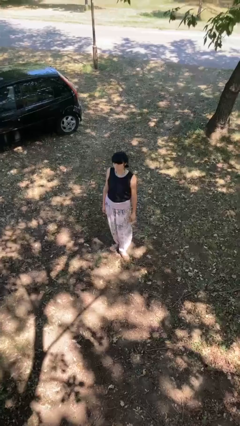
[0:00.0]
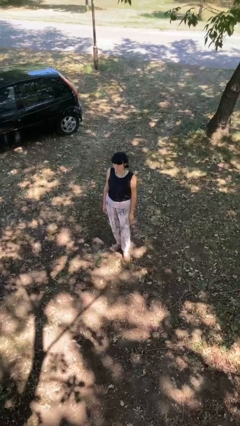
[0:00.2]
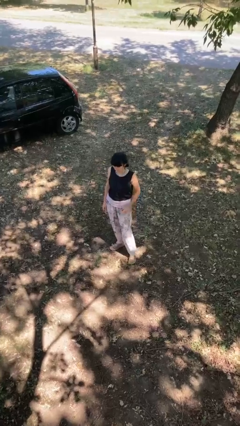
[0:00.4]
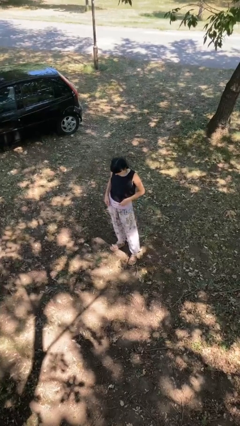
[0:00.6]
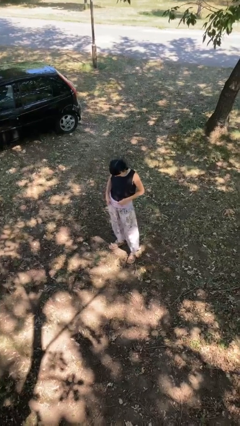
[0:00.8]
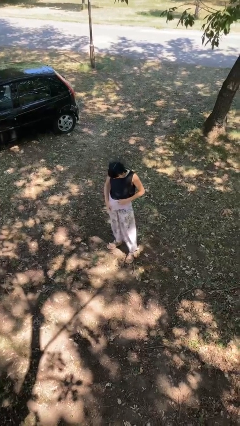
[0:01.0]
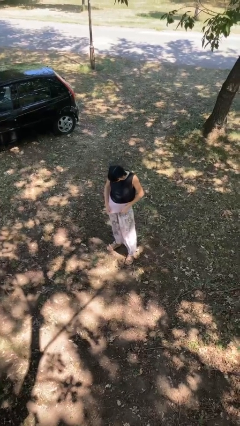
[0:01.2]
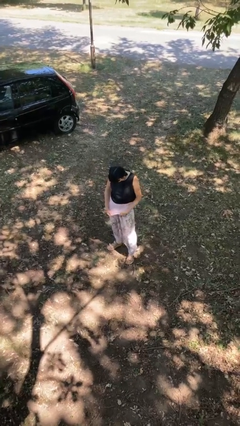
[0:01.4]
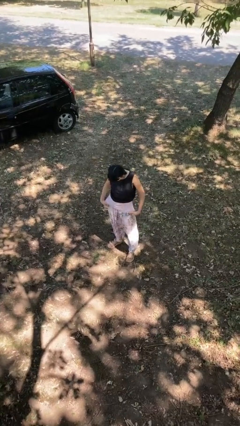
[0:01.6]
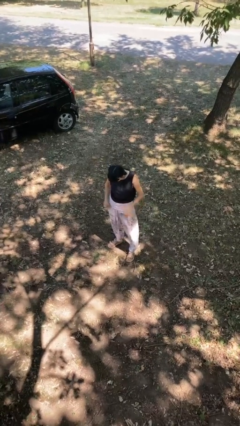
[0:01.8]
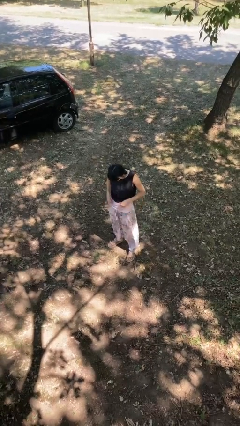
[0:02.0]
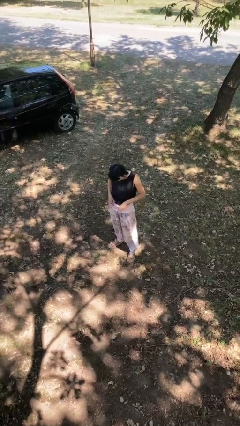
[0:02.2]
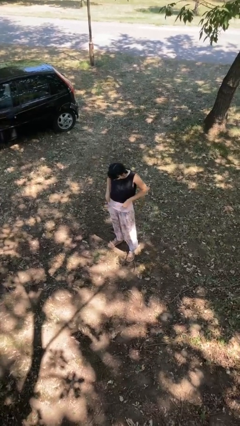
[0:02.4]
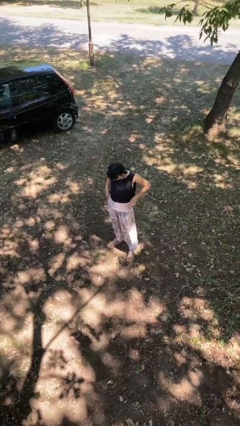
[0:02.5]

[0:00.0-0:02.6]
person hikes up pants

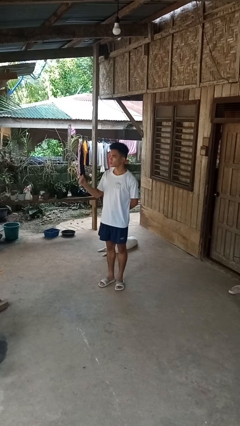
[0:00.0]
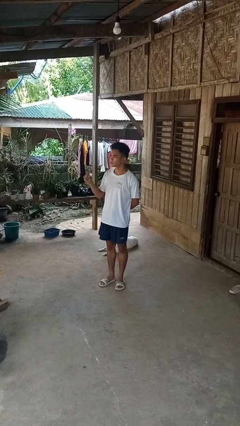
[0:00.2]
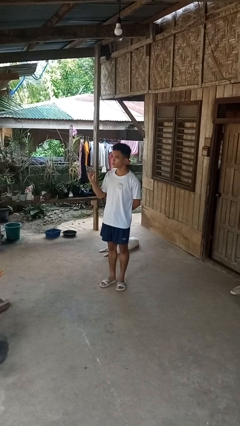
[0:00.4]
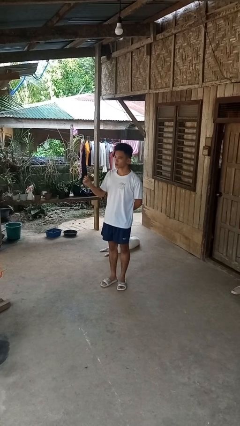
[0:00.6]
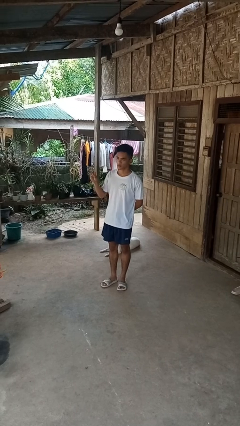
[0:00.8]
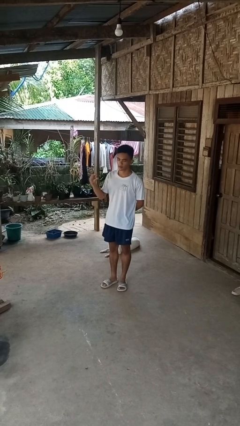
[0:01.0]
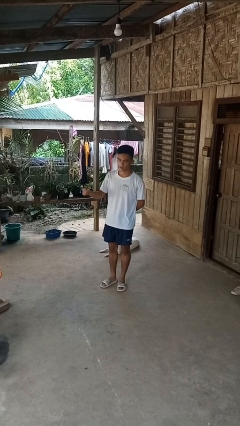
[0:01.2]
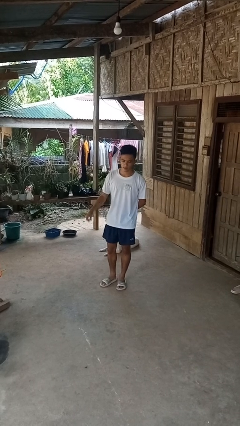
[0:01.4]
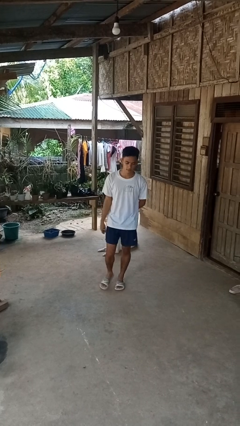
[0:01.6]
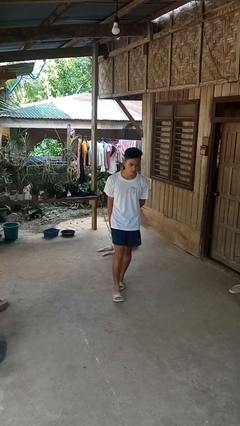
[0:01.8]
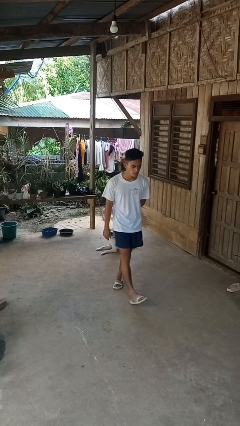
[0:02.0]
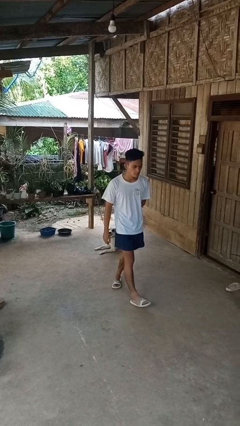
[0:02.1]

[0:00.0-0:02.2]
person snaps fingers

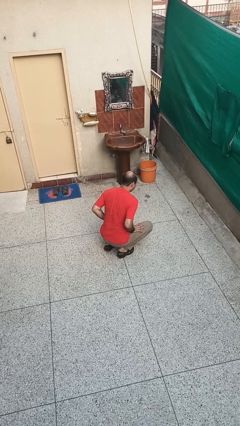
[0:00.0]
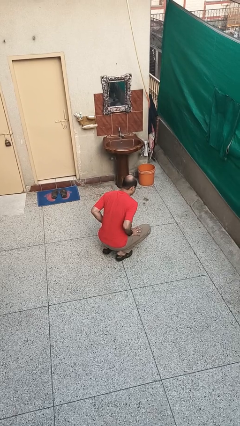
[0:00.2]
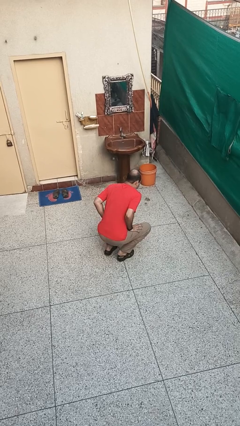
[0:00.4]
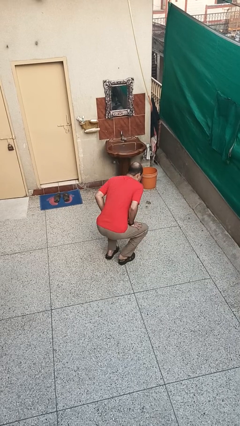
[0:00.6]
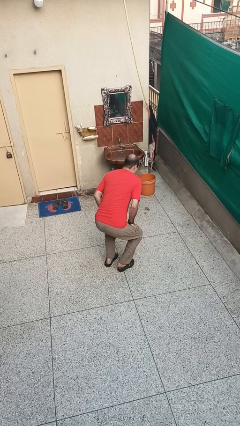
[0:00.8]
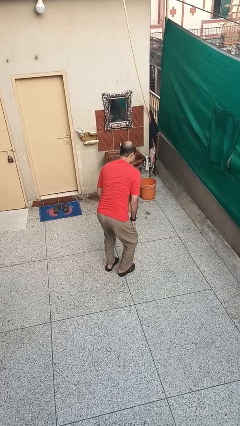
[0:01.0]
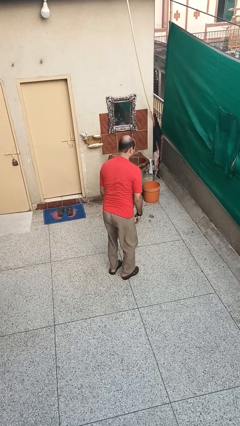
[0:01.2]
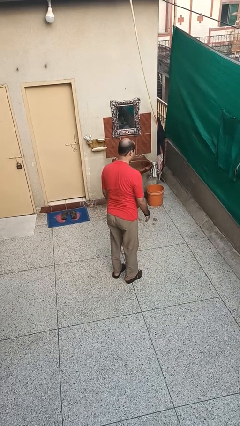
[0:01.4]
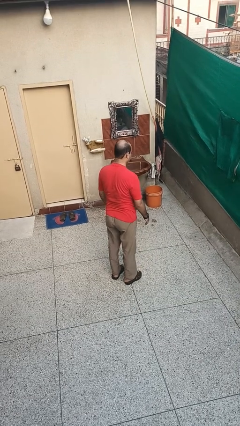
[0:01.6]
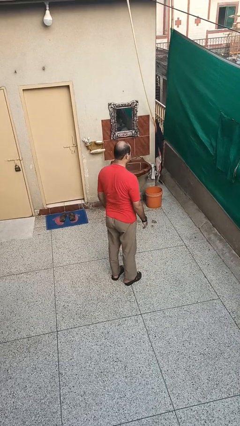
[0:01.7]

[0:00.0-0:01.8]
person stands up

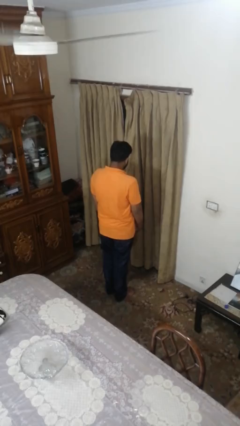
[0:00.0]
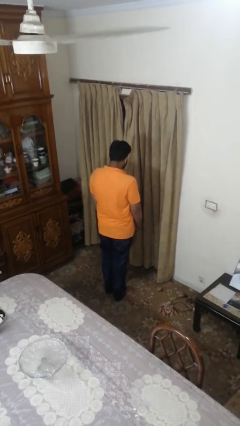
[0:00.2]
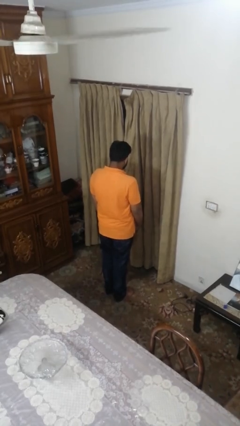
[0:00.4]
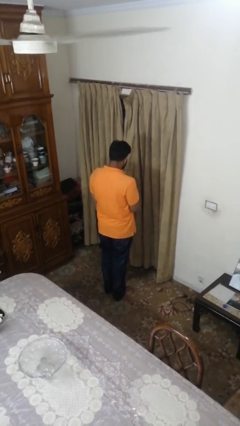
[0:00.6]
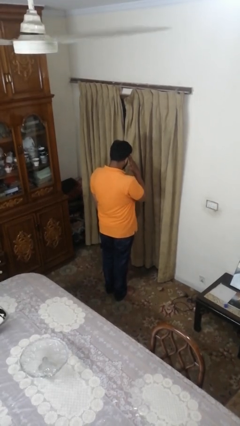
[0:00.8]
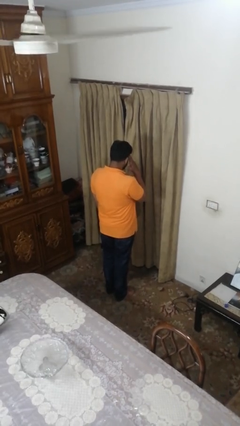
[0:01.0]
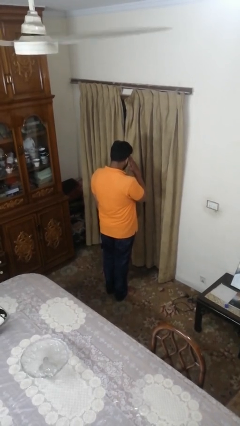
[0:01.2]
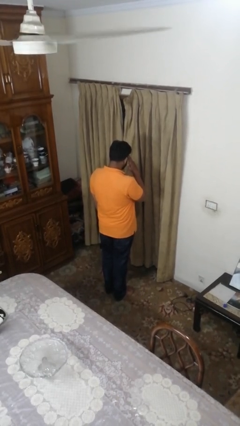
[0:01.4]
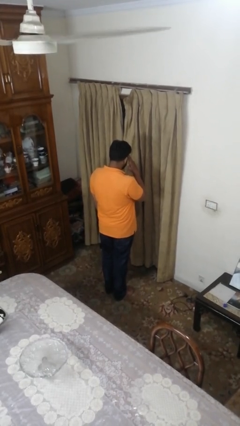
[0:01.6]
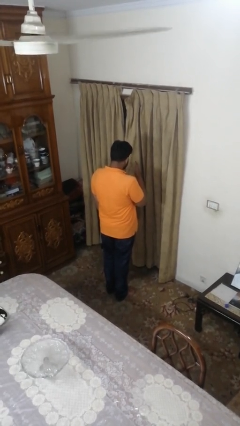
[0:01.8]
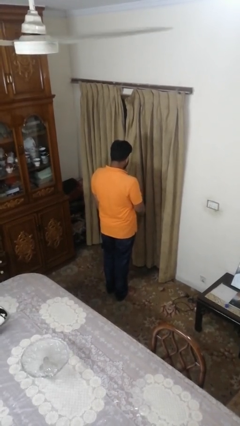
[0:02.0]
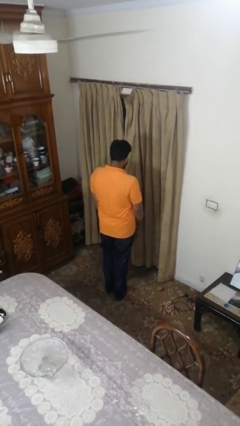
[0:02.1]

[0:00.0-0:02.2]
person salutes

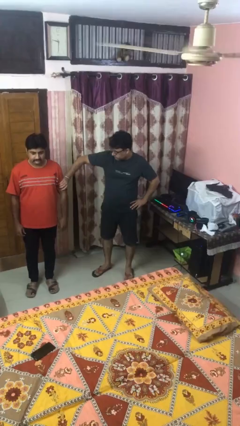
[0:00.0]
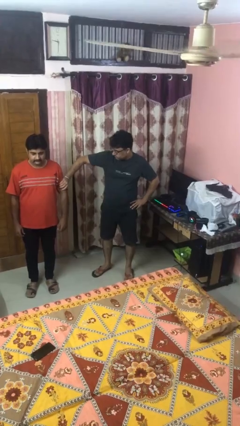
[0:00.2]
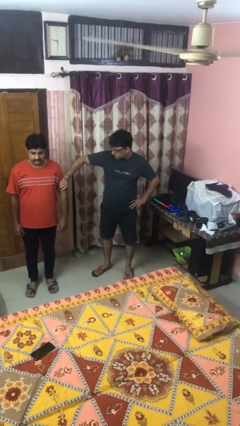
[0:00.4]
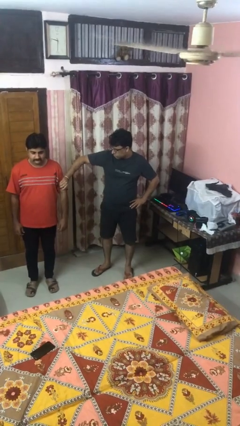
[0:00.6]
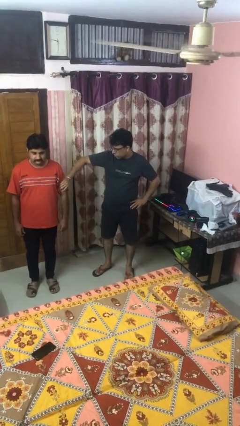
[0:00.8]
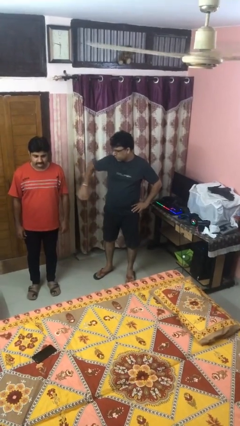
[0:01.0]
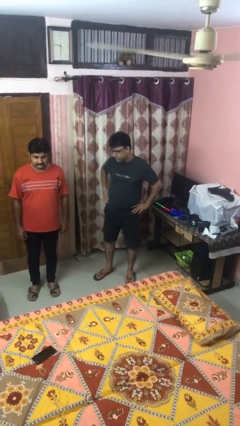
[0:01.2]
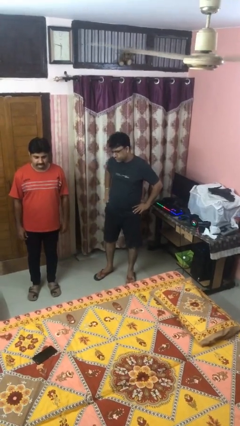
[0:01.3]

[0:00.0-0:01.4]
person grabs person by bicep

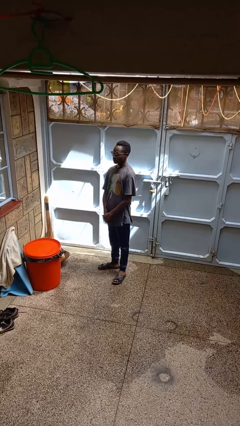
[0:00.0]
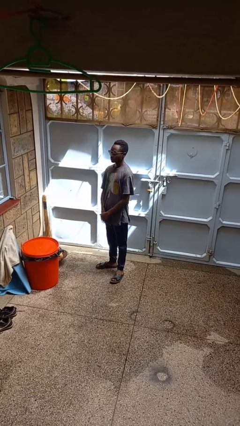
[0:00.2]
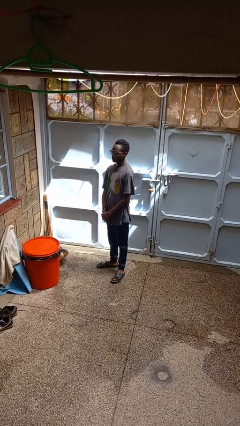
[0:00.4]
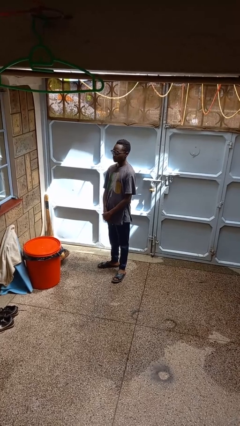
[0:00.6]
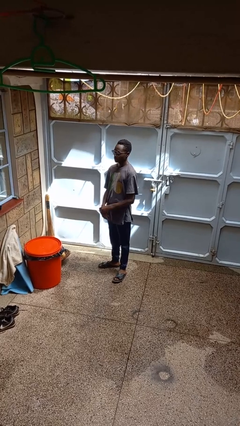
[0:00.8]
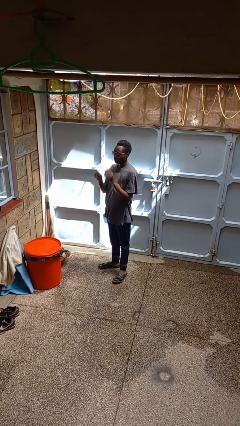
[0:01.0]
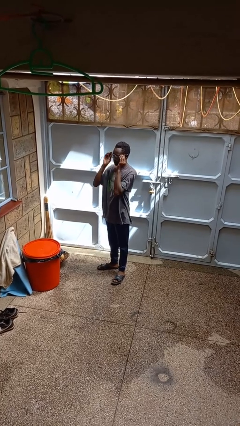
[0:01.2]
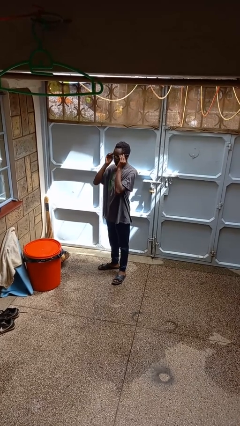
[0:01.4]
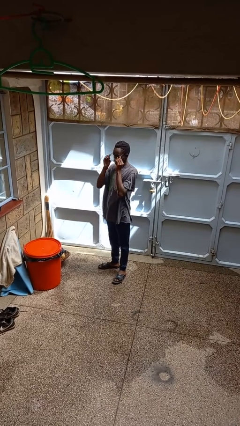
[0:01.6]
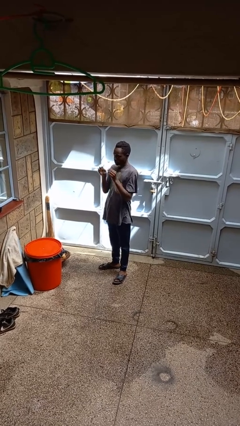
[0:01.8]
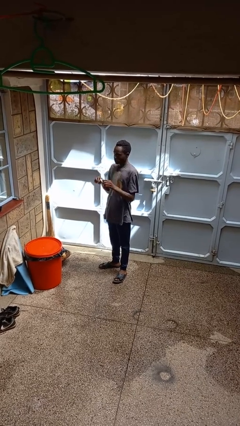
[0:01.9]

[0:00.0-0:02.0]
person takes off glasses

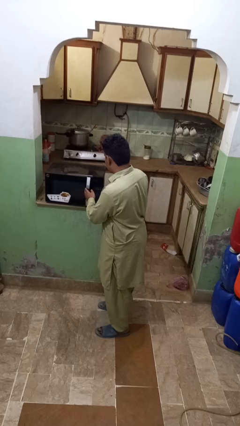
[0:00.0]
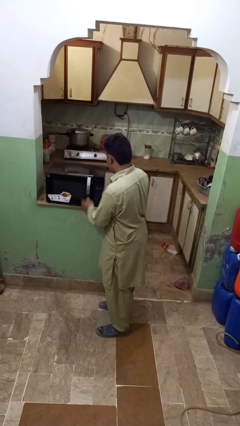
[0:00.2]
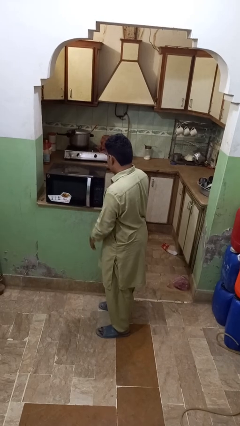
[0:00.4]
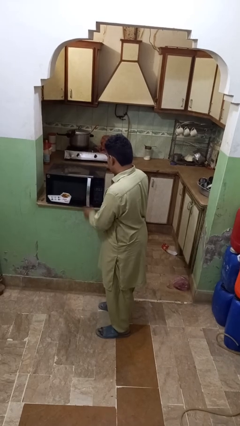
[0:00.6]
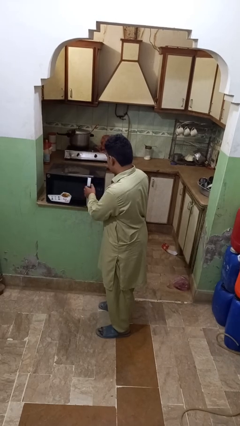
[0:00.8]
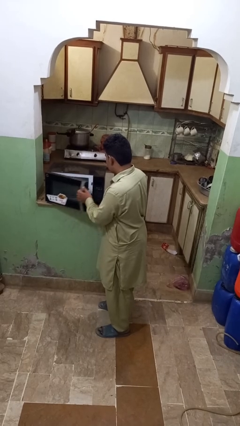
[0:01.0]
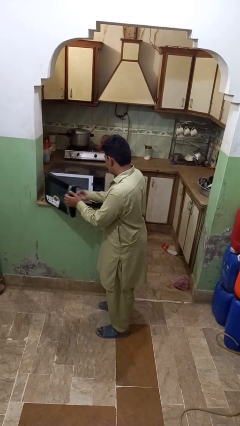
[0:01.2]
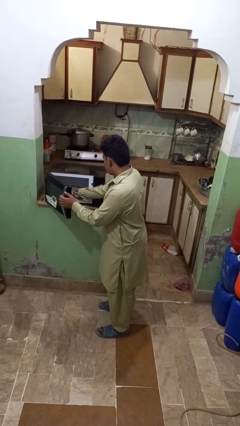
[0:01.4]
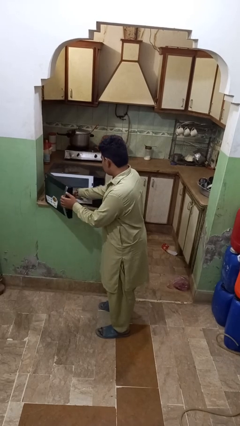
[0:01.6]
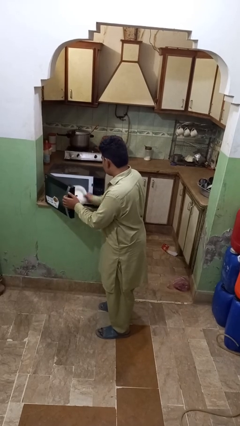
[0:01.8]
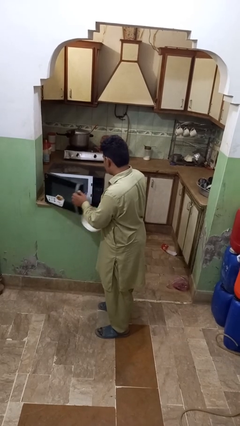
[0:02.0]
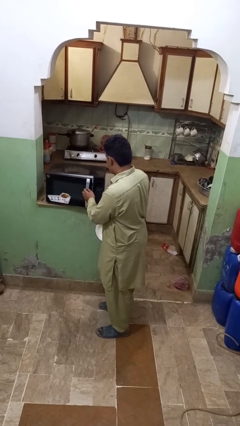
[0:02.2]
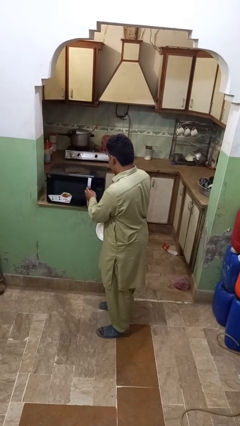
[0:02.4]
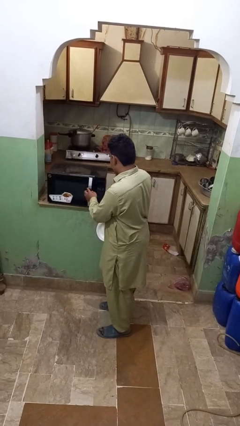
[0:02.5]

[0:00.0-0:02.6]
person takes object from microwave

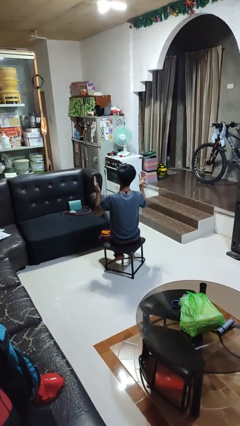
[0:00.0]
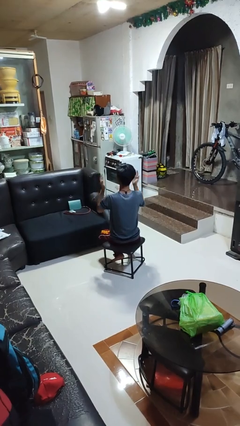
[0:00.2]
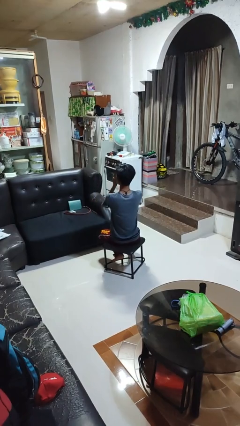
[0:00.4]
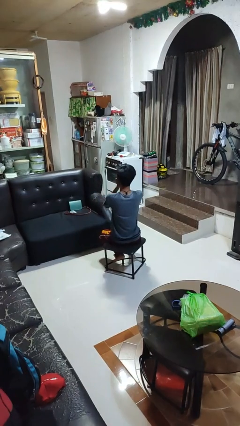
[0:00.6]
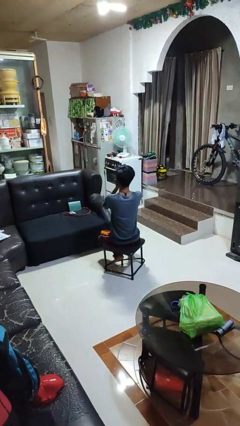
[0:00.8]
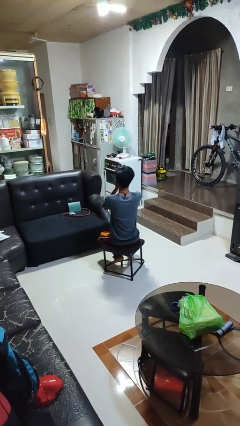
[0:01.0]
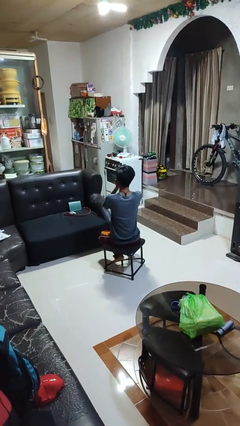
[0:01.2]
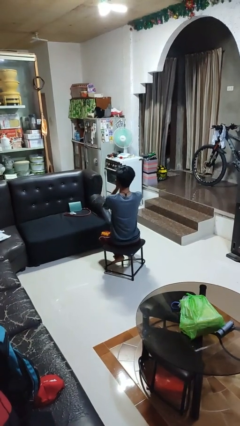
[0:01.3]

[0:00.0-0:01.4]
person covers face with hands

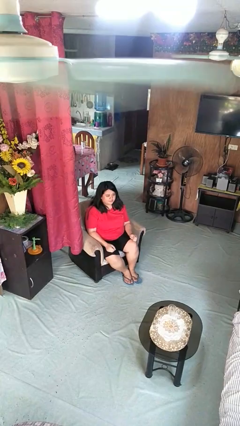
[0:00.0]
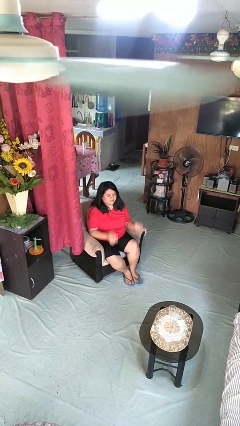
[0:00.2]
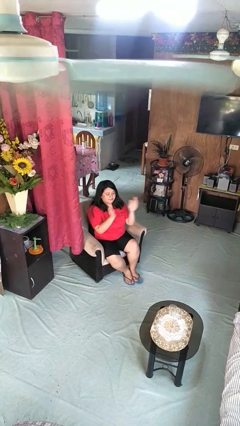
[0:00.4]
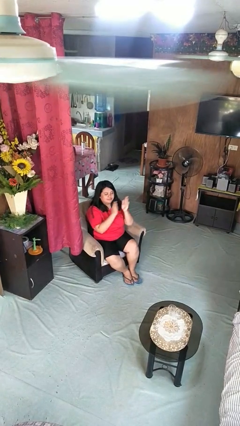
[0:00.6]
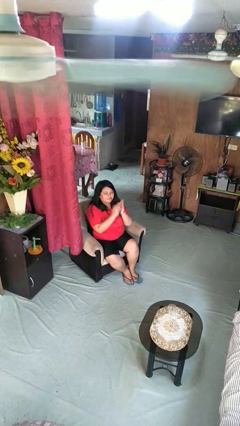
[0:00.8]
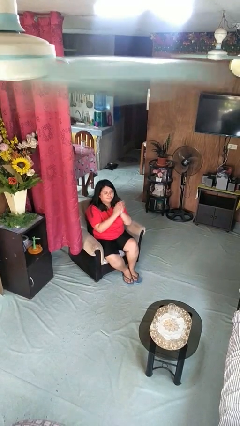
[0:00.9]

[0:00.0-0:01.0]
person claps hands
